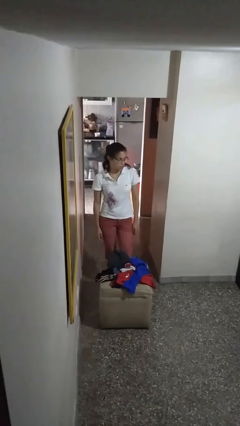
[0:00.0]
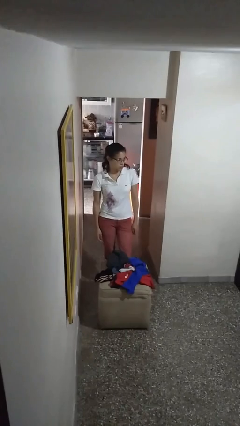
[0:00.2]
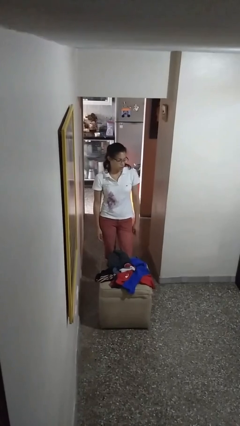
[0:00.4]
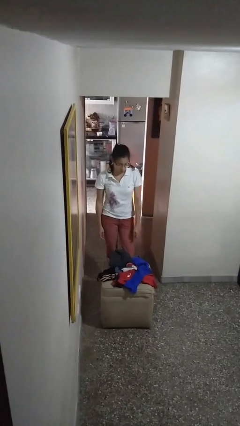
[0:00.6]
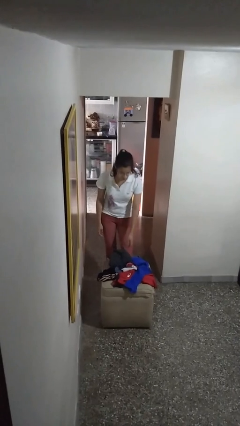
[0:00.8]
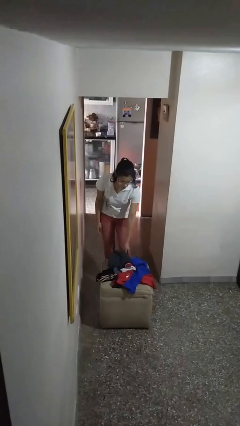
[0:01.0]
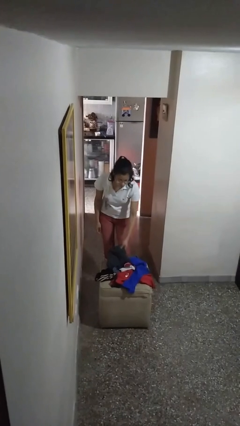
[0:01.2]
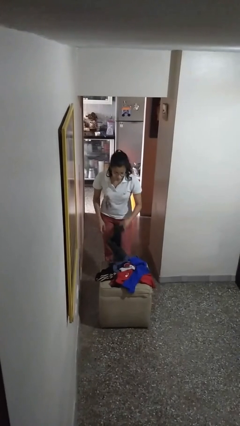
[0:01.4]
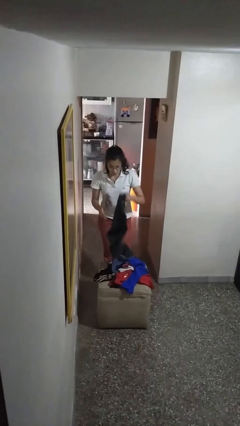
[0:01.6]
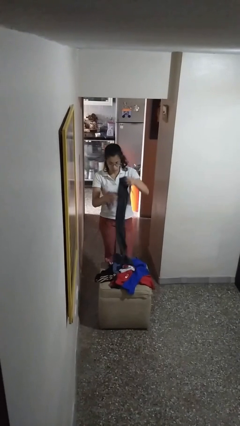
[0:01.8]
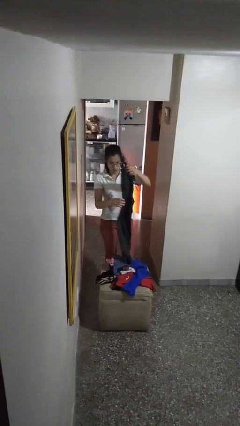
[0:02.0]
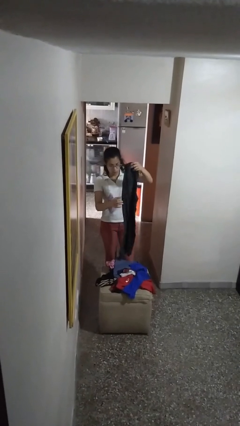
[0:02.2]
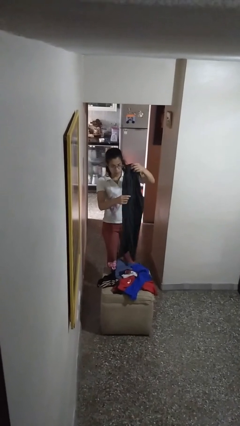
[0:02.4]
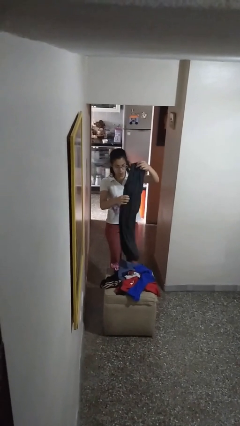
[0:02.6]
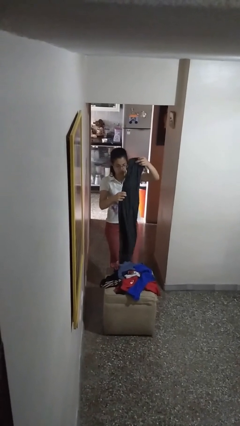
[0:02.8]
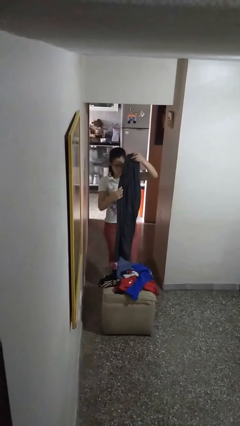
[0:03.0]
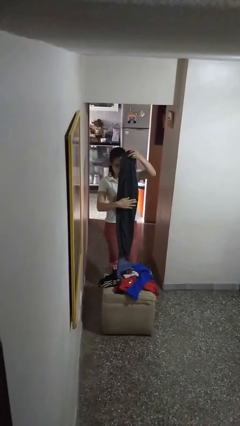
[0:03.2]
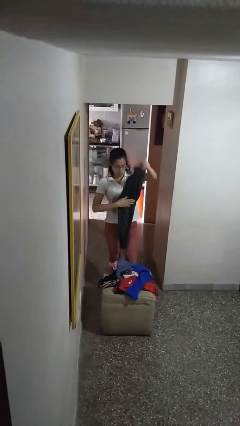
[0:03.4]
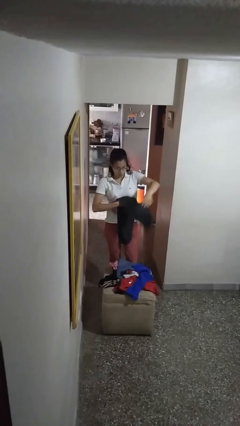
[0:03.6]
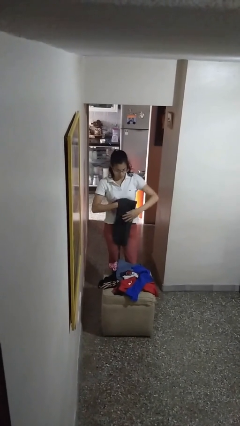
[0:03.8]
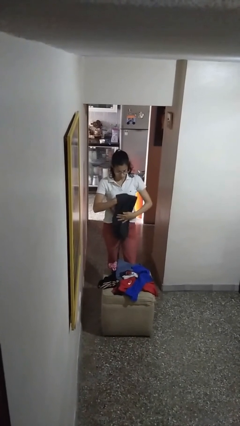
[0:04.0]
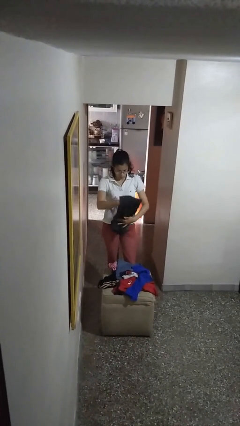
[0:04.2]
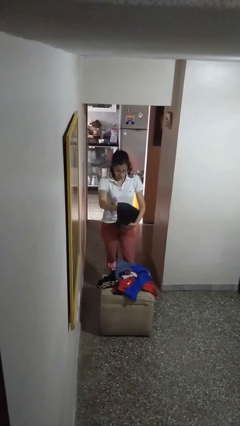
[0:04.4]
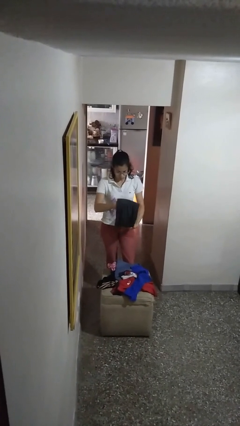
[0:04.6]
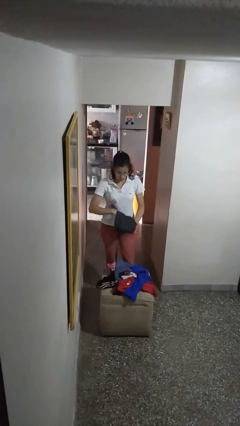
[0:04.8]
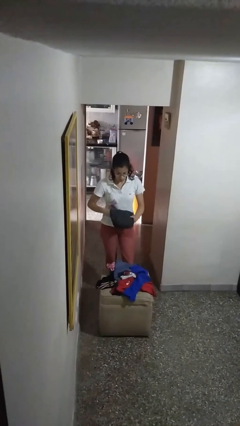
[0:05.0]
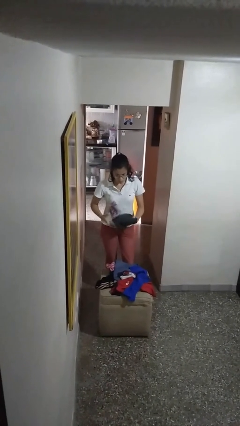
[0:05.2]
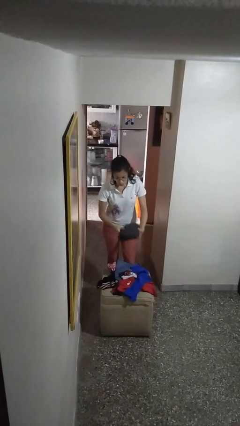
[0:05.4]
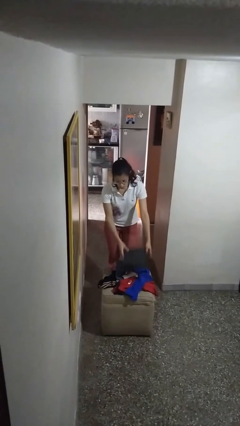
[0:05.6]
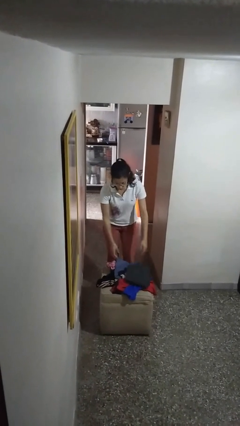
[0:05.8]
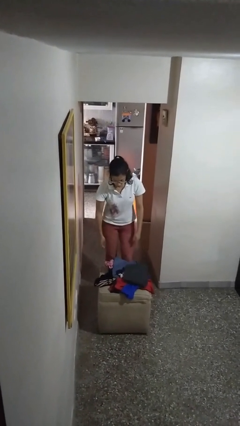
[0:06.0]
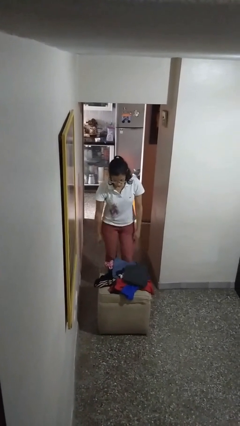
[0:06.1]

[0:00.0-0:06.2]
person folds pants

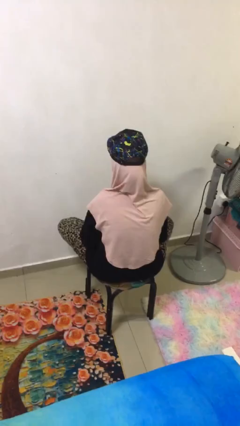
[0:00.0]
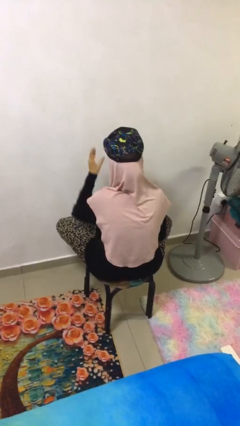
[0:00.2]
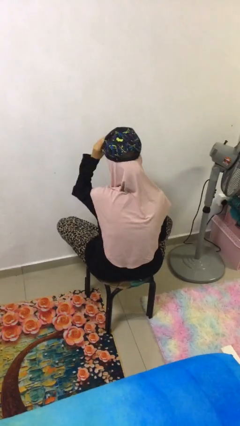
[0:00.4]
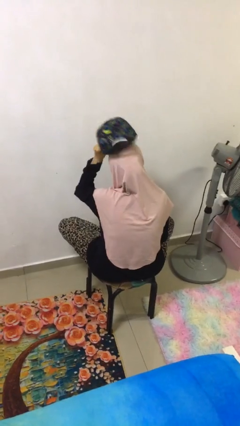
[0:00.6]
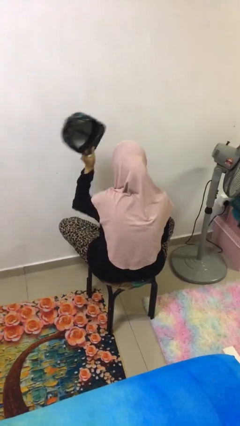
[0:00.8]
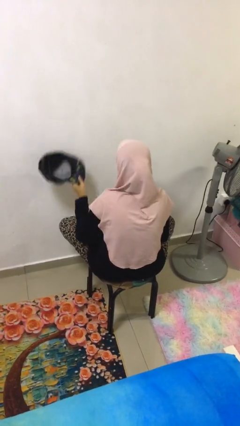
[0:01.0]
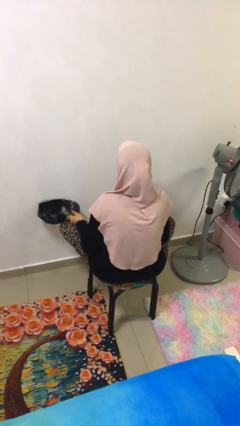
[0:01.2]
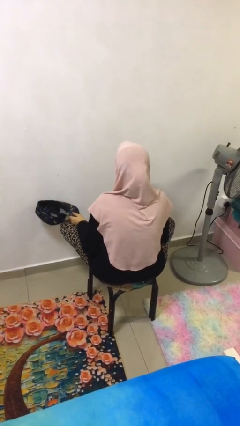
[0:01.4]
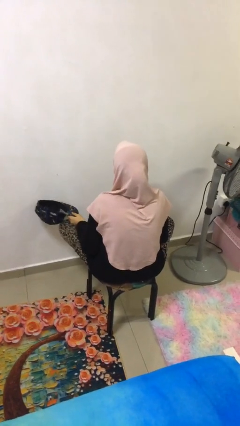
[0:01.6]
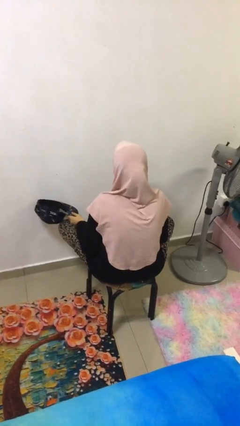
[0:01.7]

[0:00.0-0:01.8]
person takes off hat

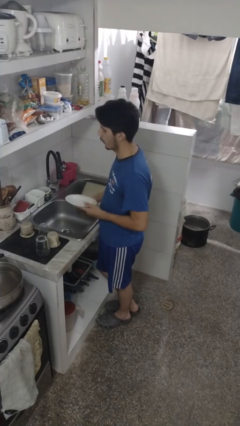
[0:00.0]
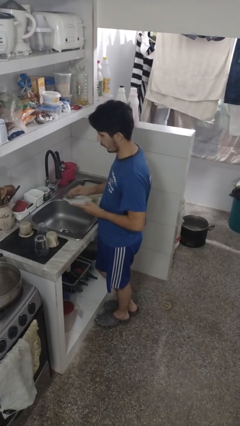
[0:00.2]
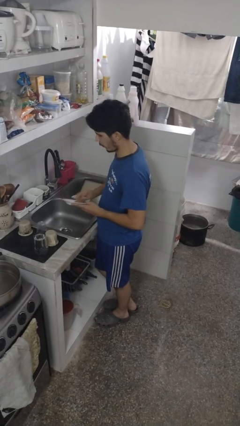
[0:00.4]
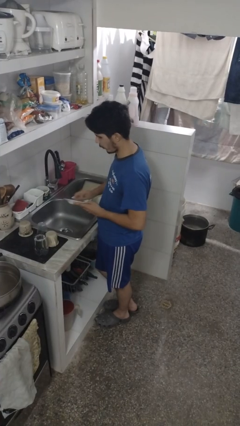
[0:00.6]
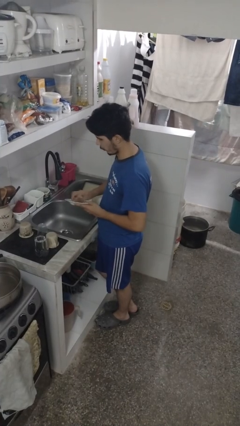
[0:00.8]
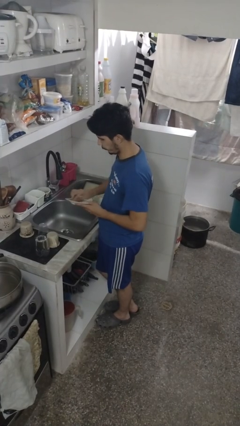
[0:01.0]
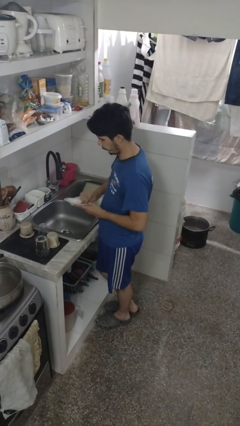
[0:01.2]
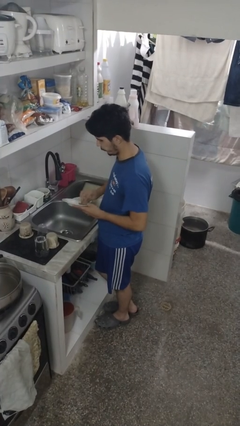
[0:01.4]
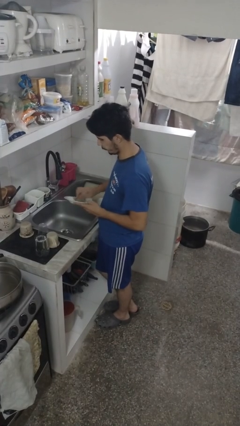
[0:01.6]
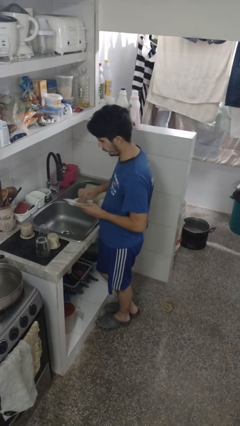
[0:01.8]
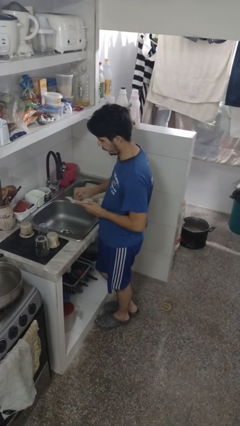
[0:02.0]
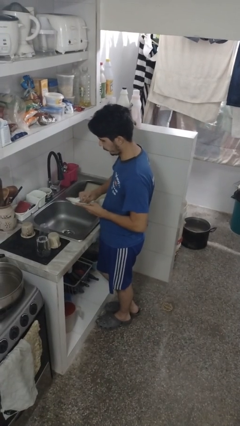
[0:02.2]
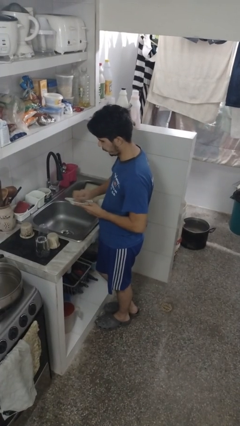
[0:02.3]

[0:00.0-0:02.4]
person washes dish

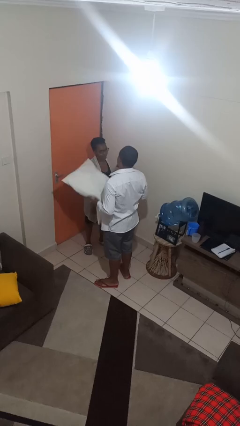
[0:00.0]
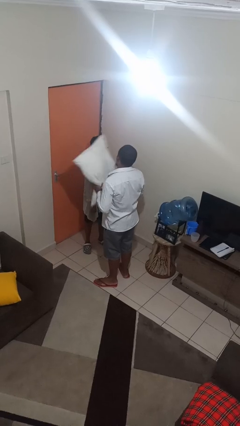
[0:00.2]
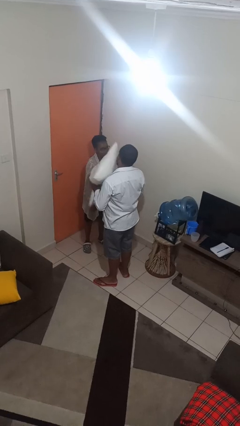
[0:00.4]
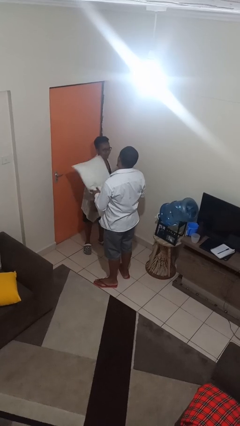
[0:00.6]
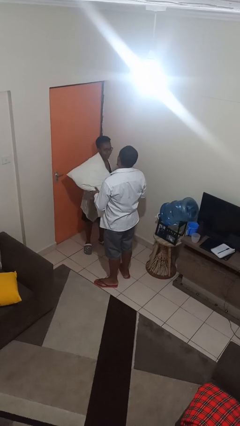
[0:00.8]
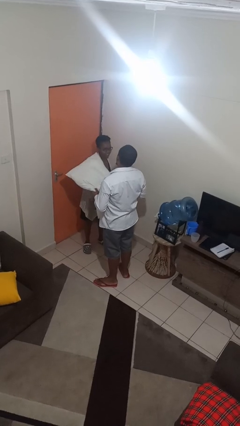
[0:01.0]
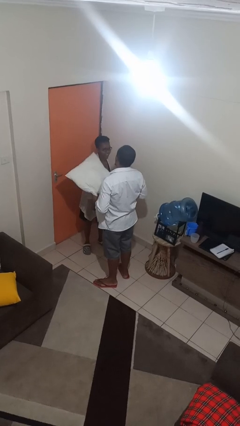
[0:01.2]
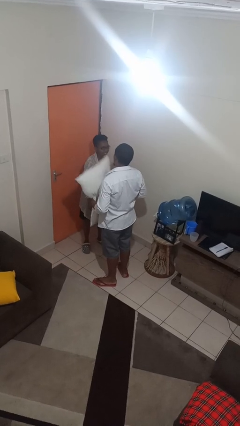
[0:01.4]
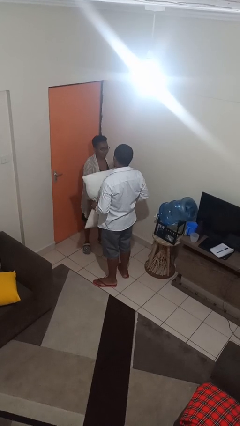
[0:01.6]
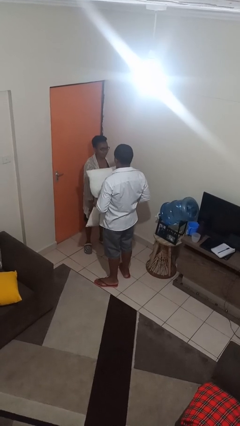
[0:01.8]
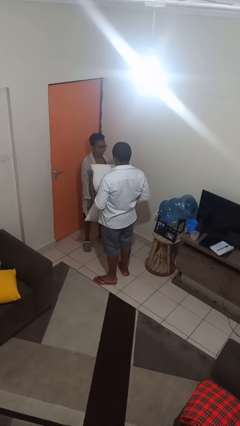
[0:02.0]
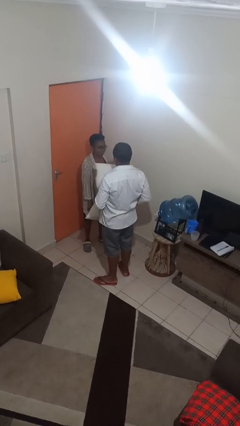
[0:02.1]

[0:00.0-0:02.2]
person hits person with pillow

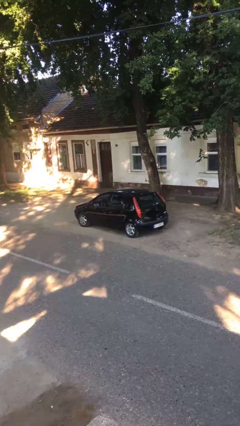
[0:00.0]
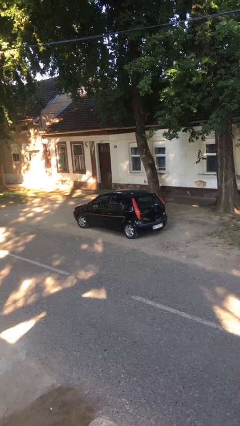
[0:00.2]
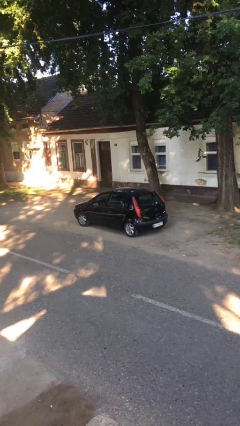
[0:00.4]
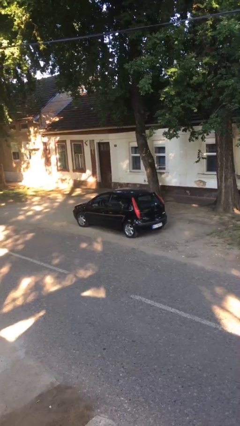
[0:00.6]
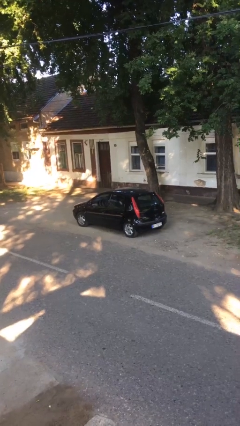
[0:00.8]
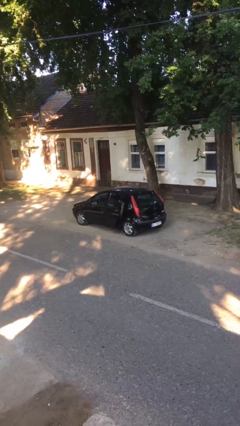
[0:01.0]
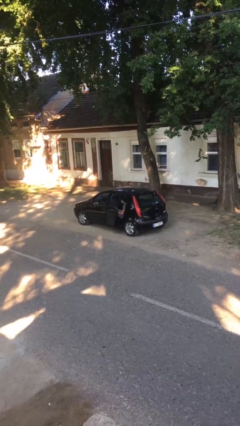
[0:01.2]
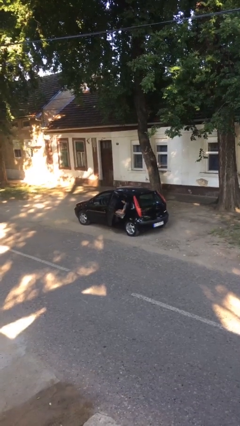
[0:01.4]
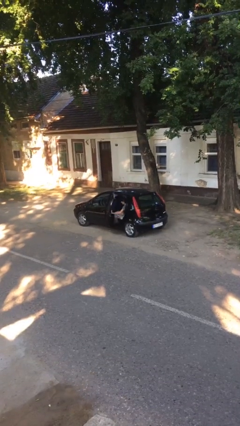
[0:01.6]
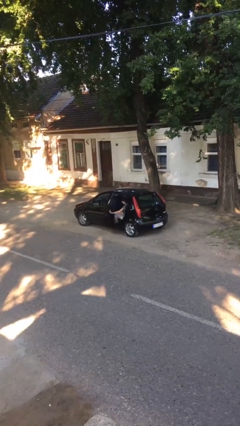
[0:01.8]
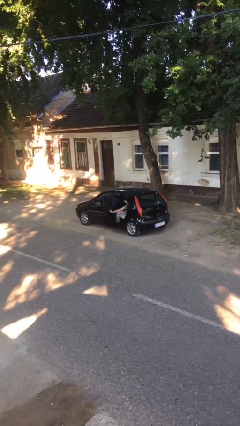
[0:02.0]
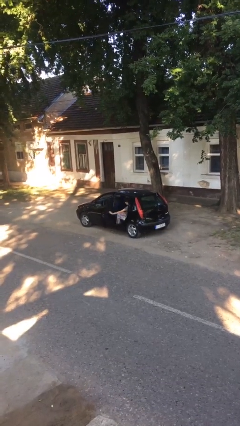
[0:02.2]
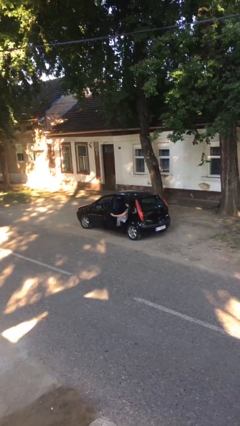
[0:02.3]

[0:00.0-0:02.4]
person opens car door

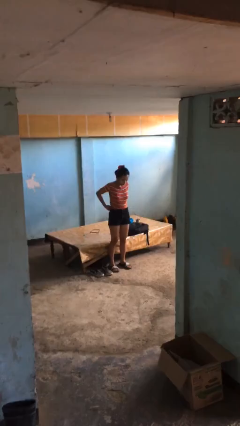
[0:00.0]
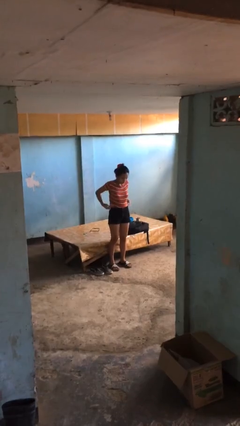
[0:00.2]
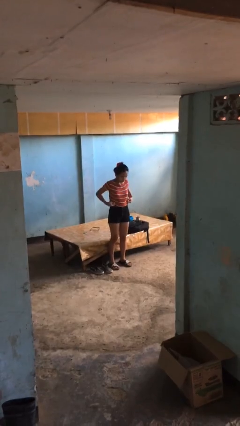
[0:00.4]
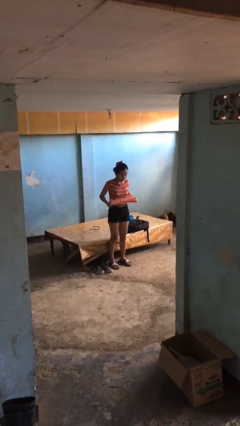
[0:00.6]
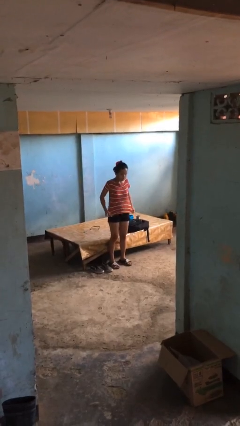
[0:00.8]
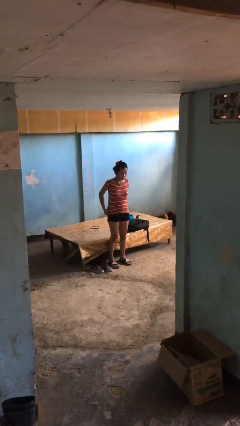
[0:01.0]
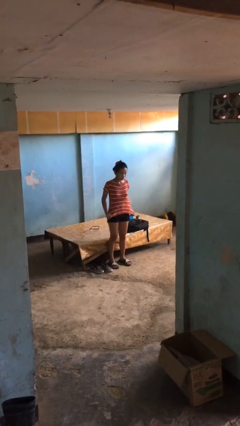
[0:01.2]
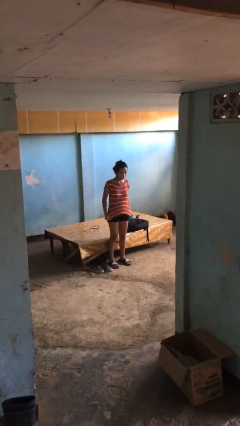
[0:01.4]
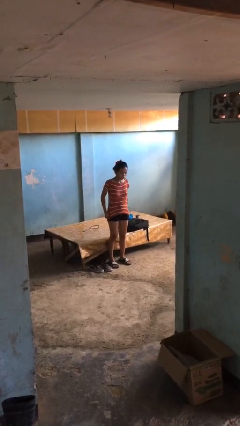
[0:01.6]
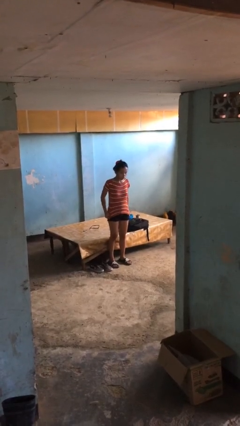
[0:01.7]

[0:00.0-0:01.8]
person untucks shirt

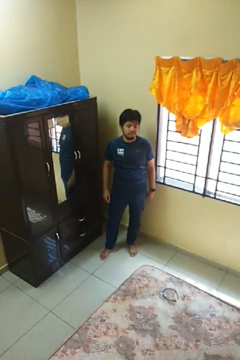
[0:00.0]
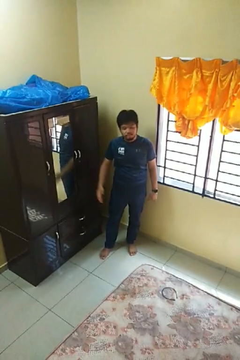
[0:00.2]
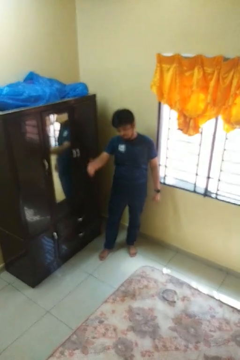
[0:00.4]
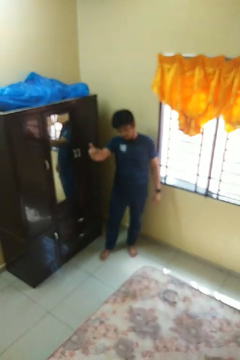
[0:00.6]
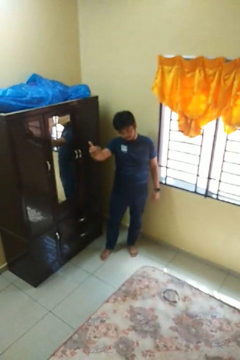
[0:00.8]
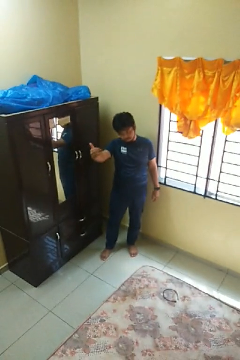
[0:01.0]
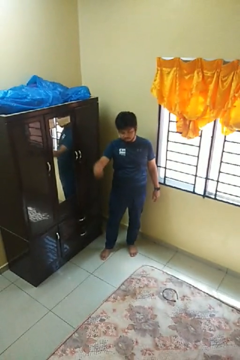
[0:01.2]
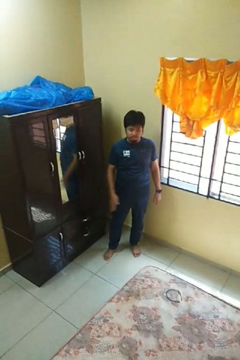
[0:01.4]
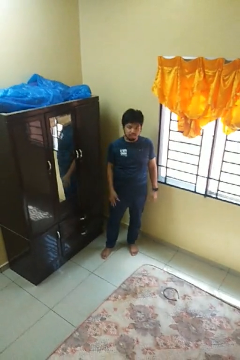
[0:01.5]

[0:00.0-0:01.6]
person gestures come here
